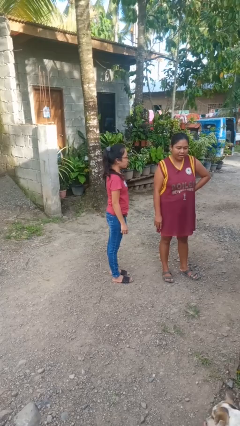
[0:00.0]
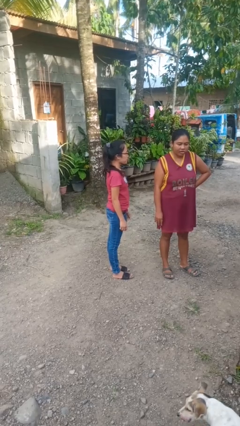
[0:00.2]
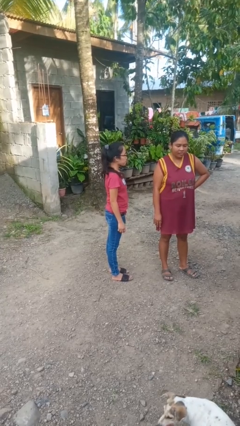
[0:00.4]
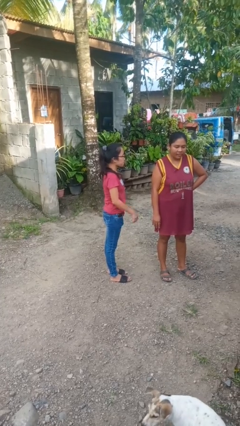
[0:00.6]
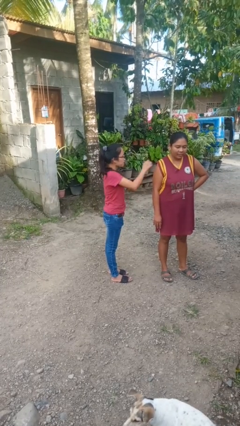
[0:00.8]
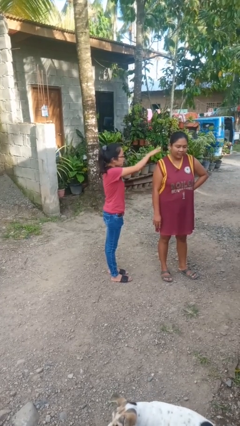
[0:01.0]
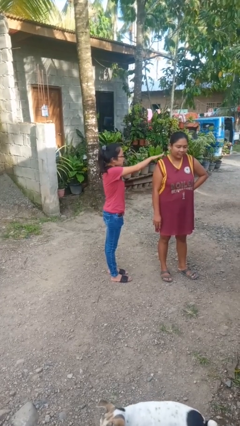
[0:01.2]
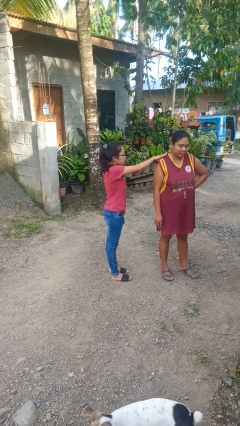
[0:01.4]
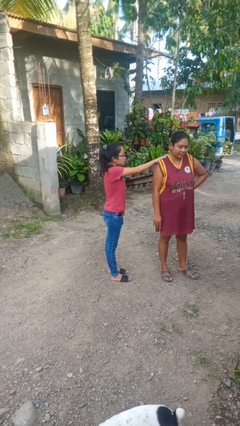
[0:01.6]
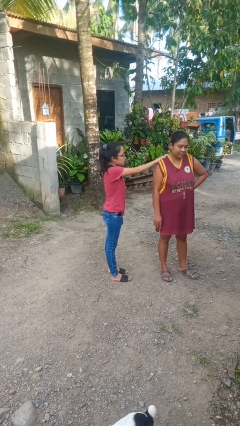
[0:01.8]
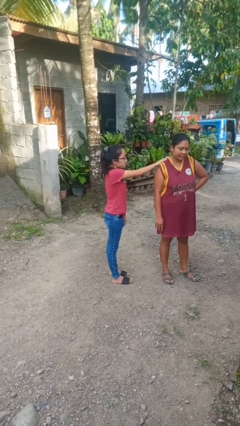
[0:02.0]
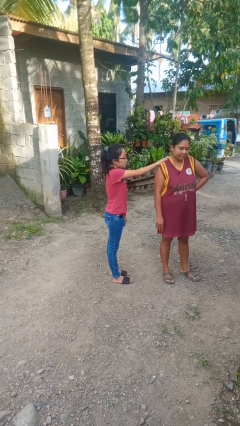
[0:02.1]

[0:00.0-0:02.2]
person pounds shoulders of person

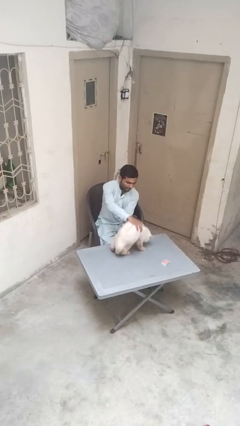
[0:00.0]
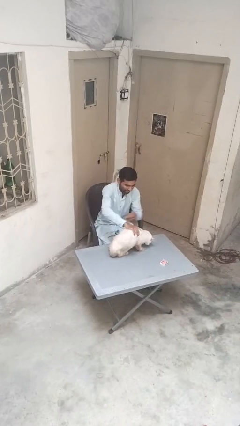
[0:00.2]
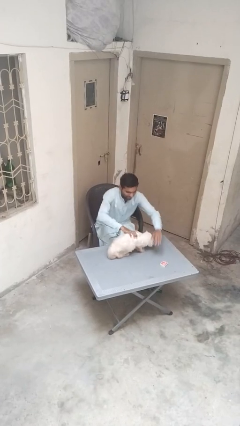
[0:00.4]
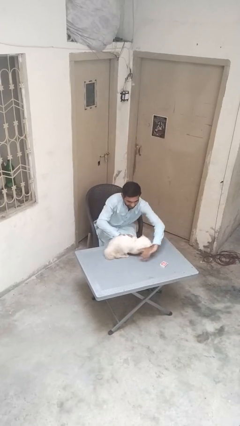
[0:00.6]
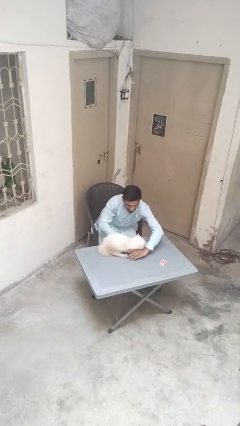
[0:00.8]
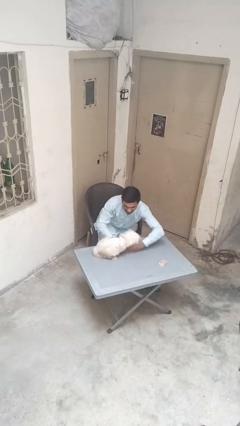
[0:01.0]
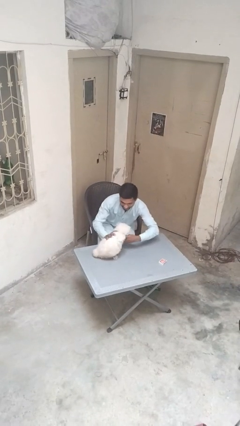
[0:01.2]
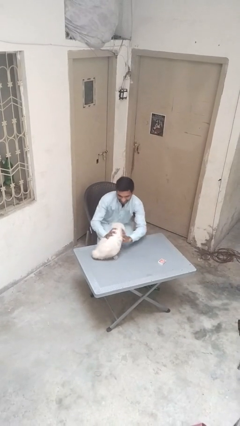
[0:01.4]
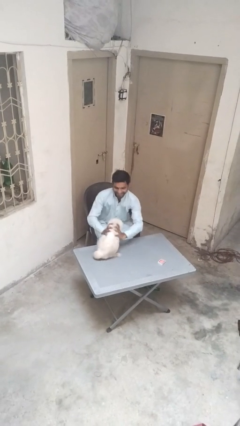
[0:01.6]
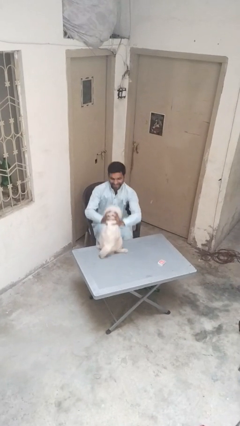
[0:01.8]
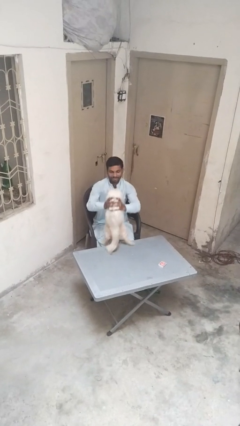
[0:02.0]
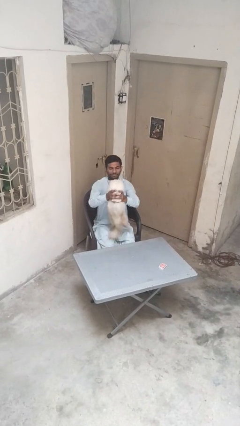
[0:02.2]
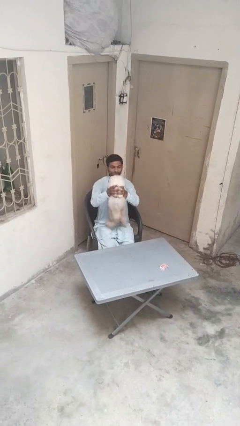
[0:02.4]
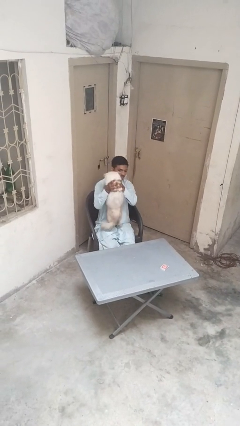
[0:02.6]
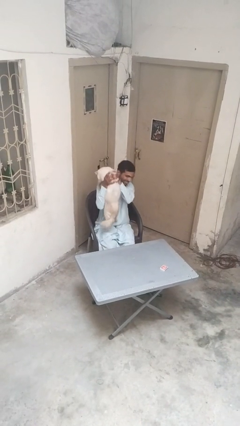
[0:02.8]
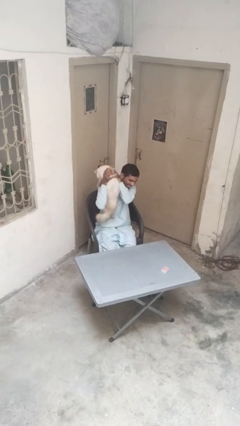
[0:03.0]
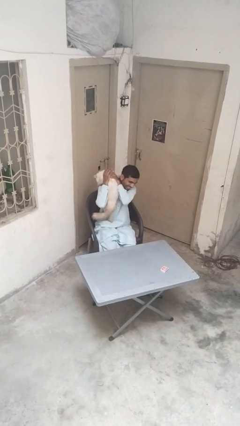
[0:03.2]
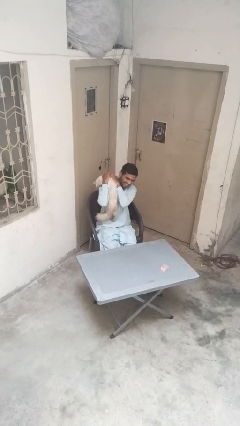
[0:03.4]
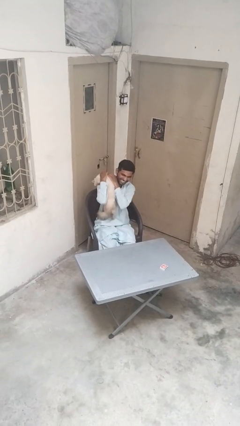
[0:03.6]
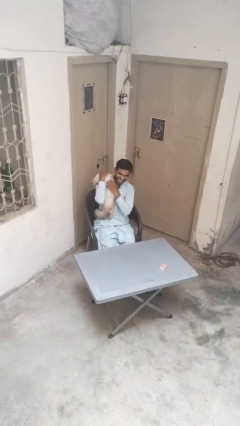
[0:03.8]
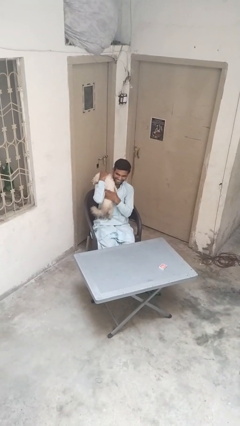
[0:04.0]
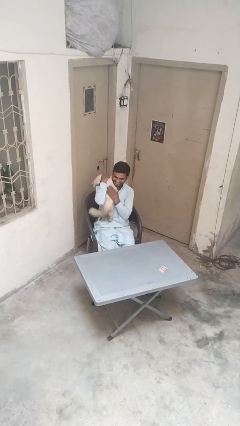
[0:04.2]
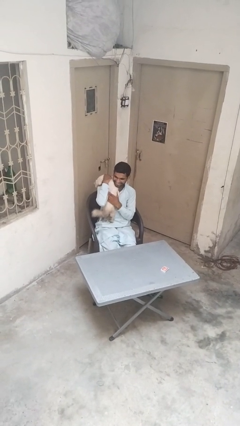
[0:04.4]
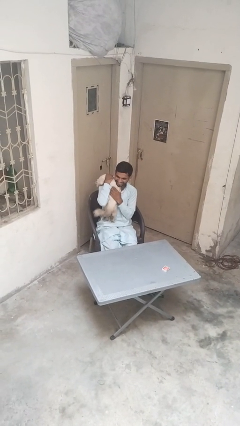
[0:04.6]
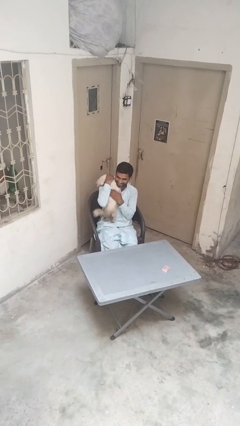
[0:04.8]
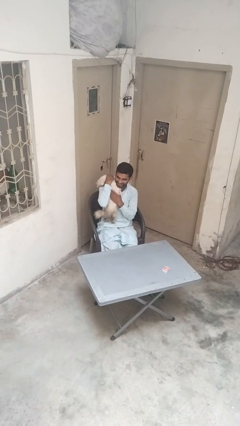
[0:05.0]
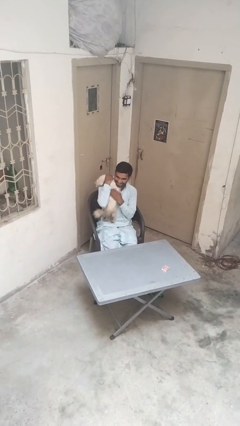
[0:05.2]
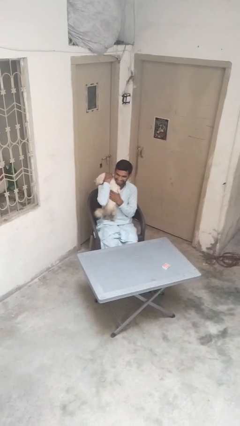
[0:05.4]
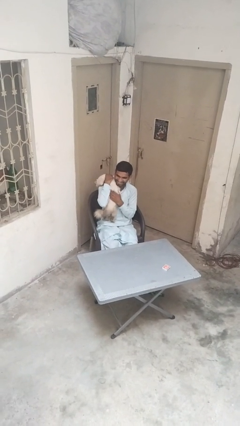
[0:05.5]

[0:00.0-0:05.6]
person hugs cat

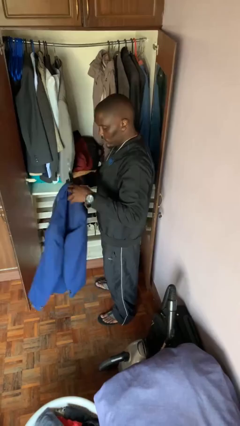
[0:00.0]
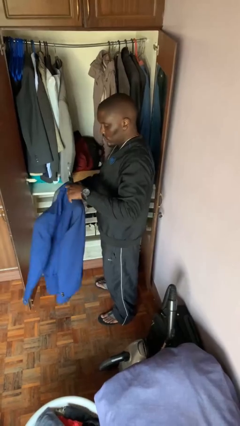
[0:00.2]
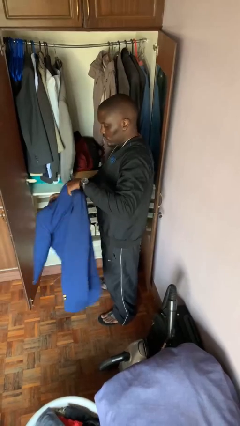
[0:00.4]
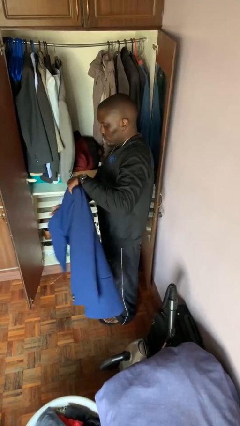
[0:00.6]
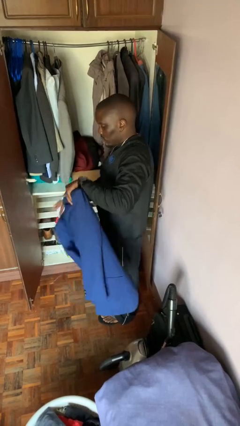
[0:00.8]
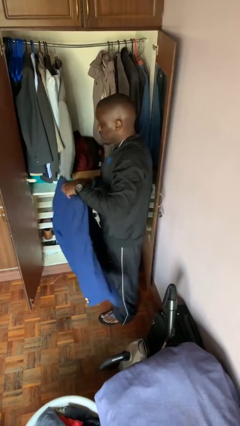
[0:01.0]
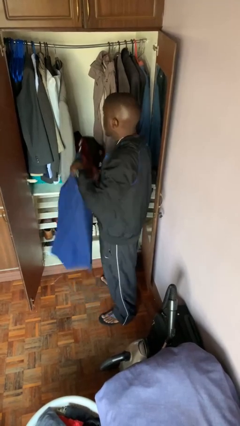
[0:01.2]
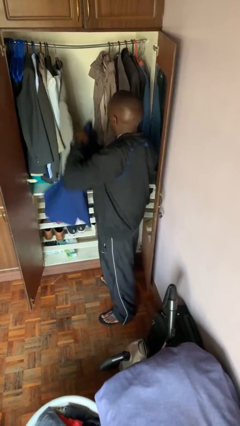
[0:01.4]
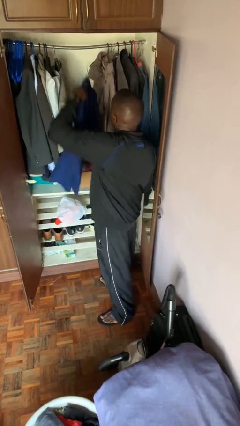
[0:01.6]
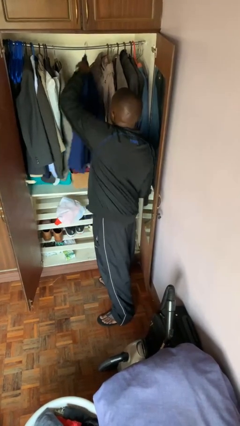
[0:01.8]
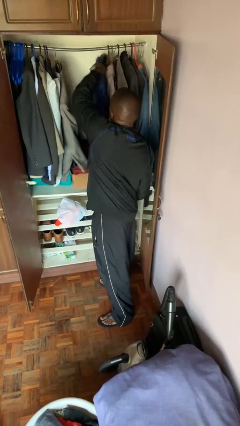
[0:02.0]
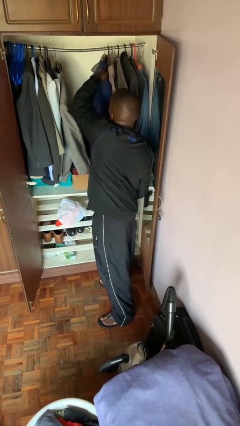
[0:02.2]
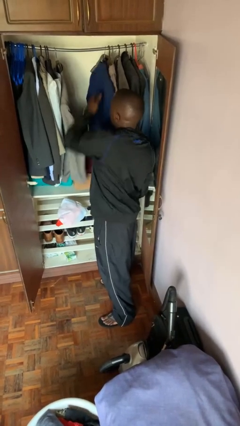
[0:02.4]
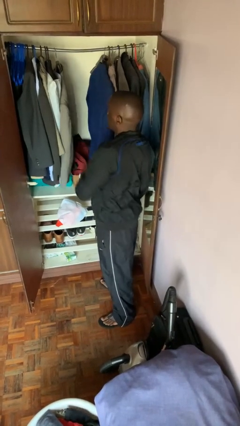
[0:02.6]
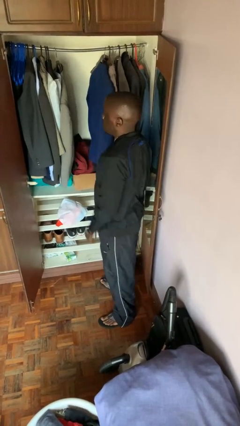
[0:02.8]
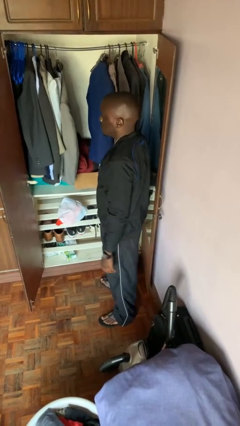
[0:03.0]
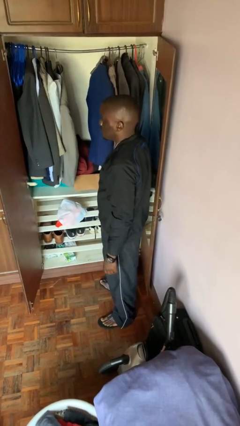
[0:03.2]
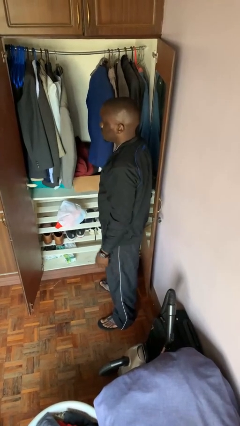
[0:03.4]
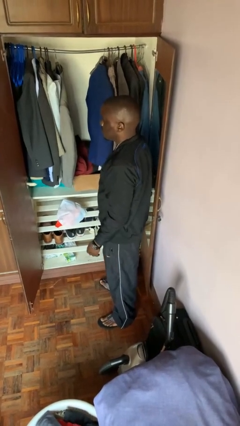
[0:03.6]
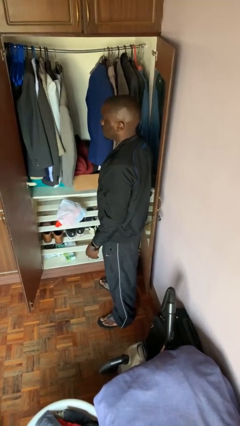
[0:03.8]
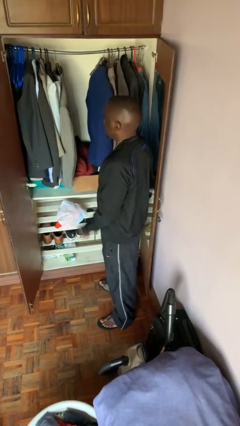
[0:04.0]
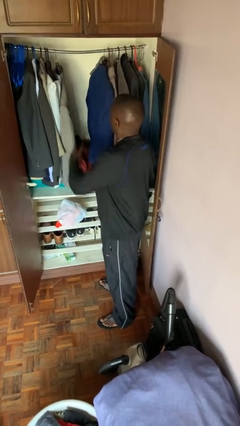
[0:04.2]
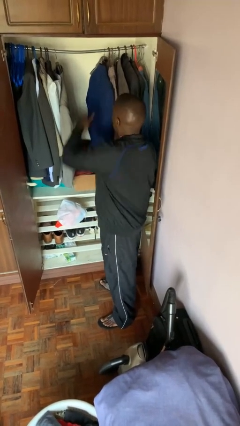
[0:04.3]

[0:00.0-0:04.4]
person puts clothes into closet

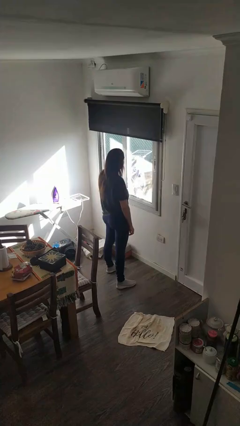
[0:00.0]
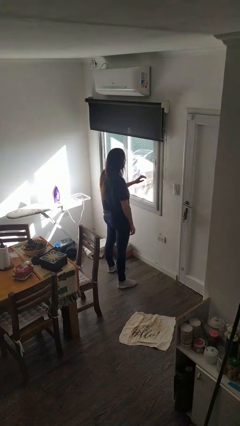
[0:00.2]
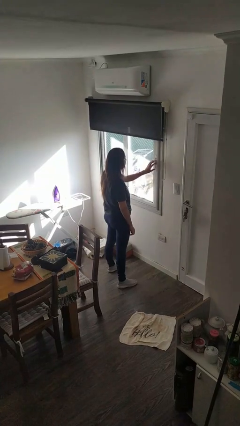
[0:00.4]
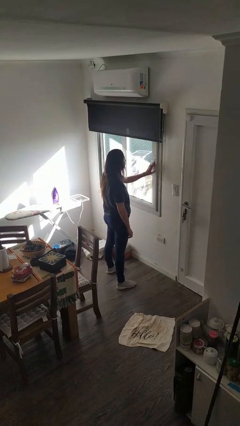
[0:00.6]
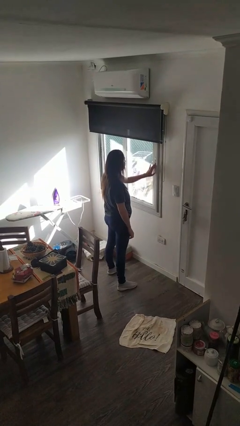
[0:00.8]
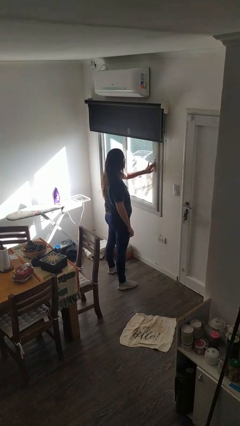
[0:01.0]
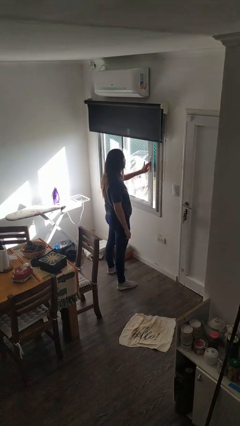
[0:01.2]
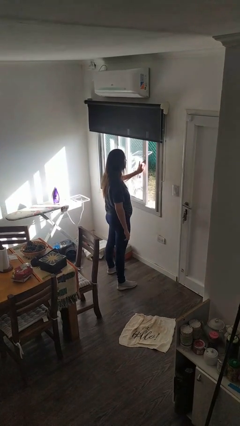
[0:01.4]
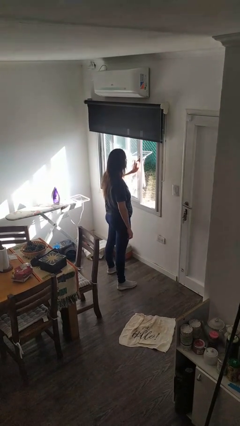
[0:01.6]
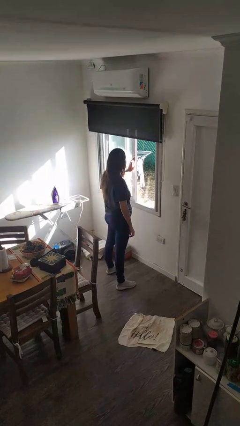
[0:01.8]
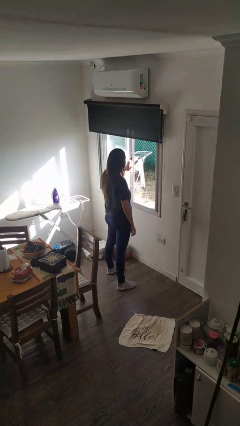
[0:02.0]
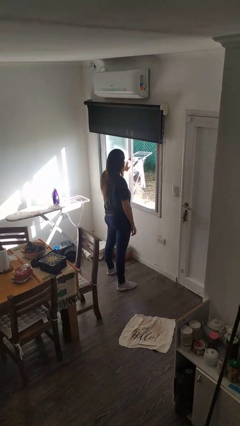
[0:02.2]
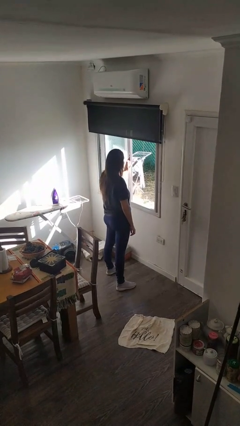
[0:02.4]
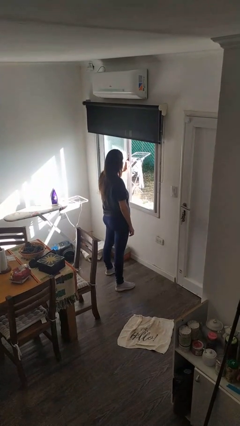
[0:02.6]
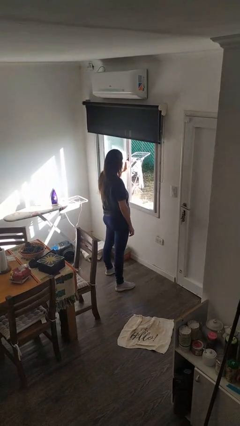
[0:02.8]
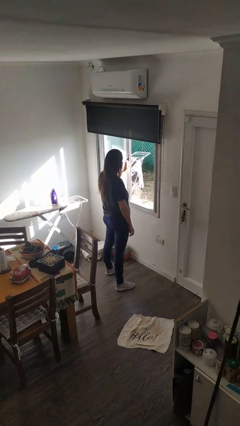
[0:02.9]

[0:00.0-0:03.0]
person opens home window

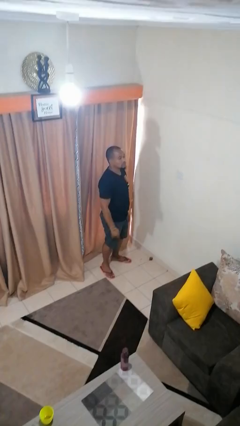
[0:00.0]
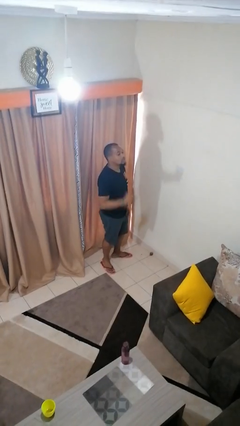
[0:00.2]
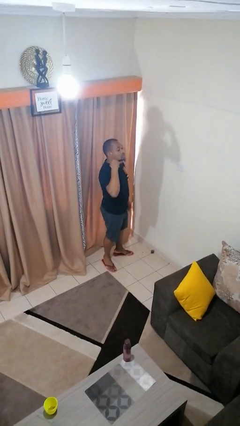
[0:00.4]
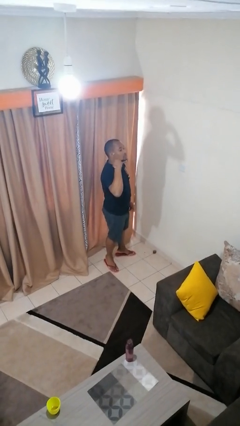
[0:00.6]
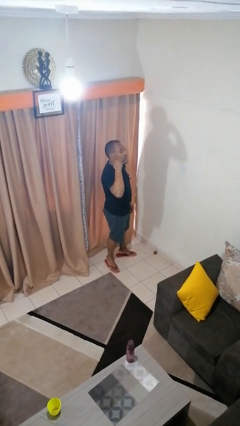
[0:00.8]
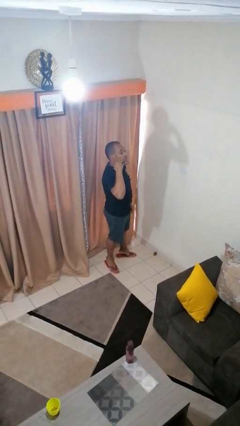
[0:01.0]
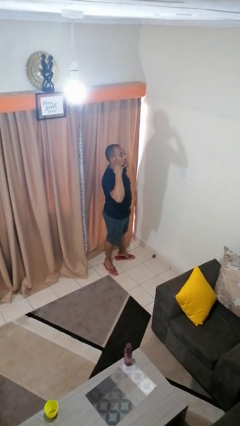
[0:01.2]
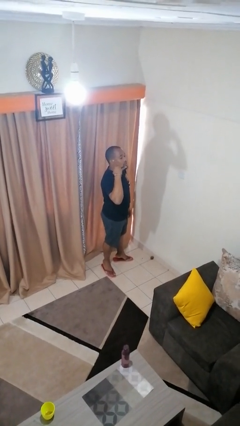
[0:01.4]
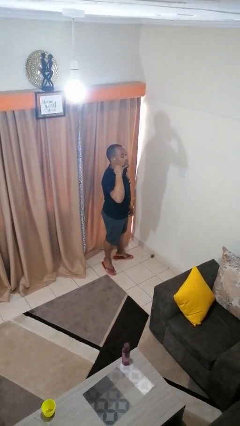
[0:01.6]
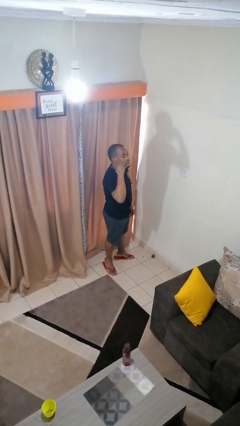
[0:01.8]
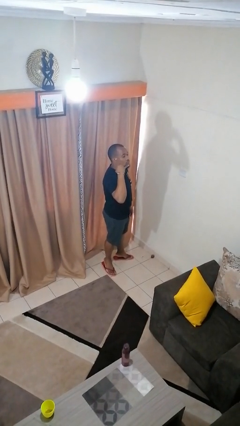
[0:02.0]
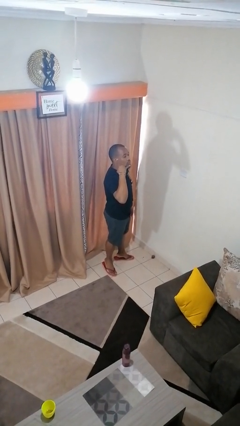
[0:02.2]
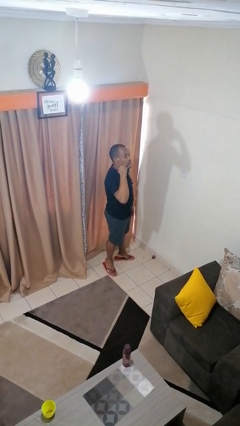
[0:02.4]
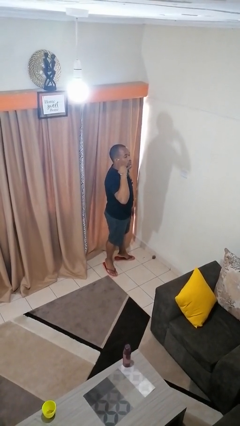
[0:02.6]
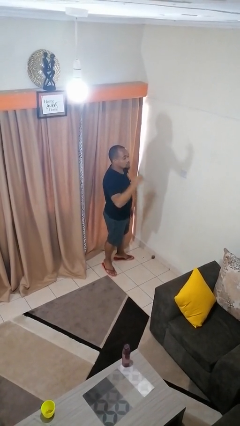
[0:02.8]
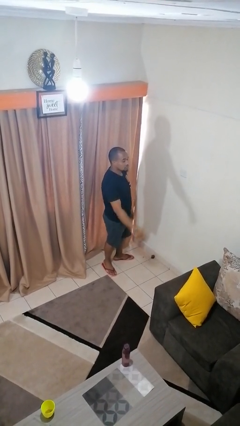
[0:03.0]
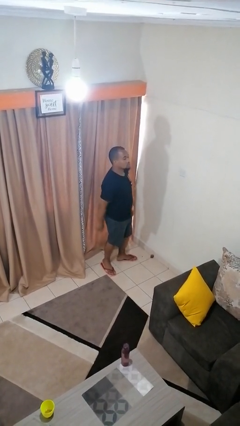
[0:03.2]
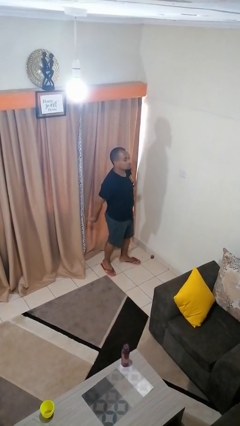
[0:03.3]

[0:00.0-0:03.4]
person gestures call me
